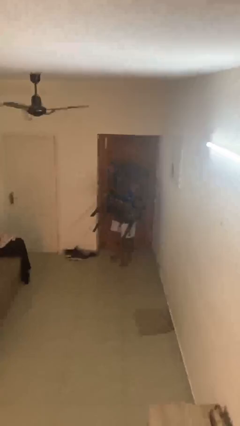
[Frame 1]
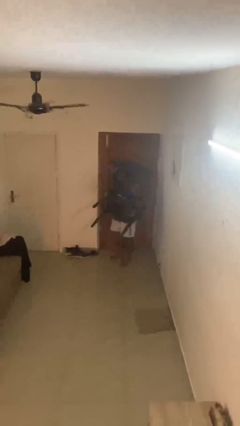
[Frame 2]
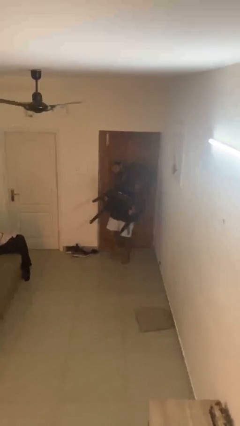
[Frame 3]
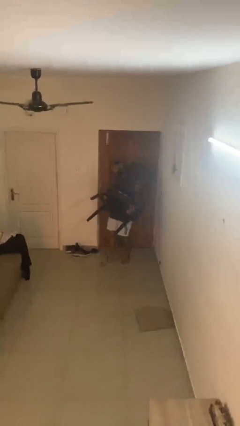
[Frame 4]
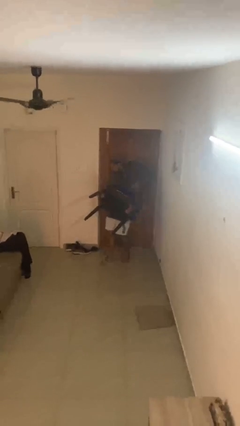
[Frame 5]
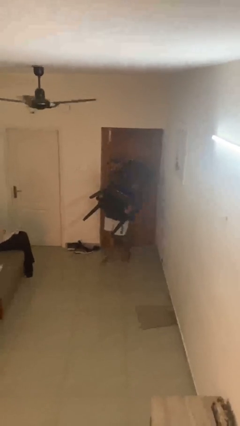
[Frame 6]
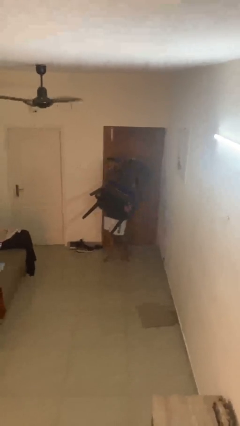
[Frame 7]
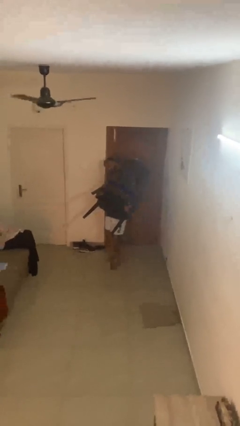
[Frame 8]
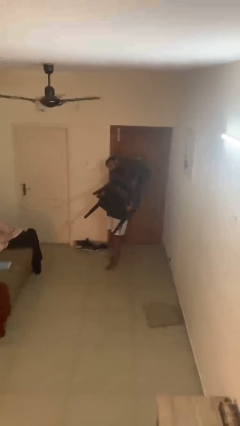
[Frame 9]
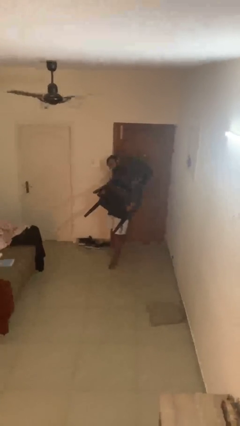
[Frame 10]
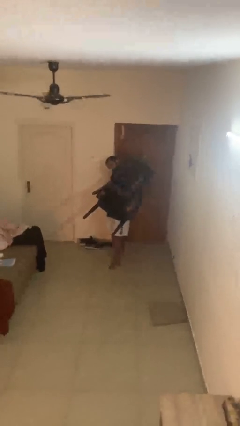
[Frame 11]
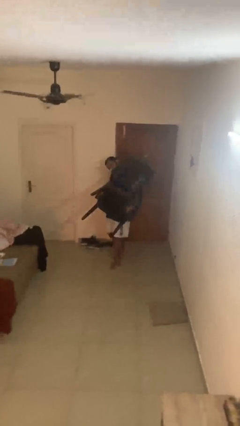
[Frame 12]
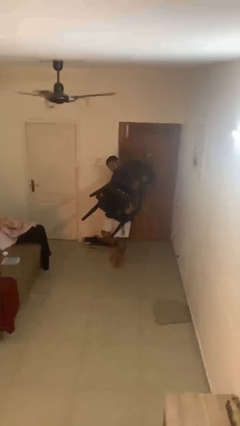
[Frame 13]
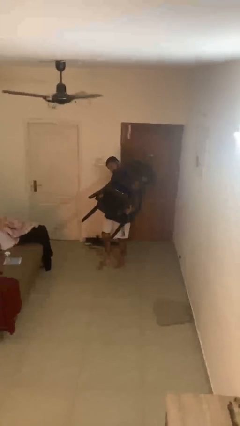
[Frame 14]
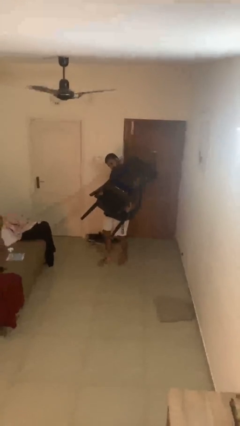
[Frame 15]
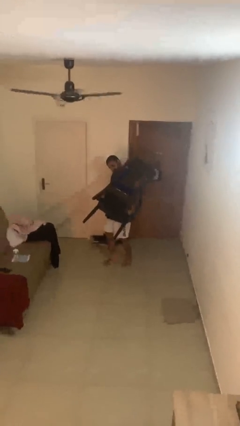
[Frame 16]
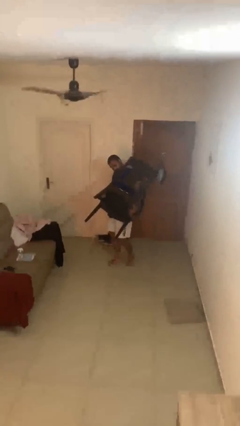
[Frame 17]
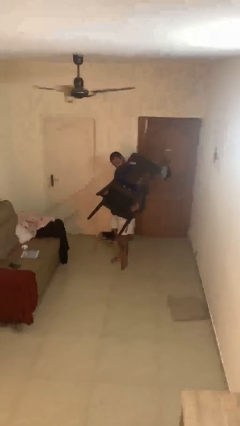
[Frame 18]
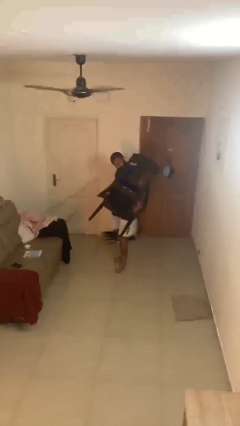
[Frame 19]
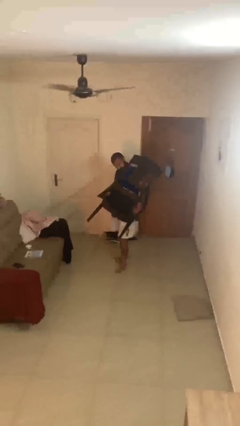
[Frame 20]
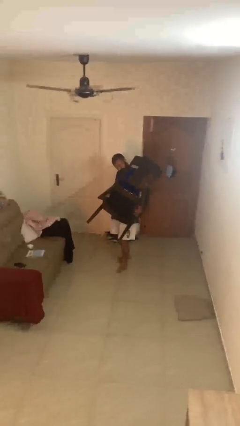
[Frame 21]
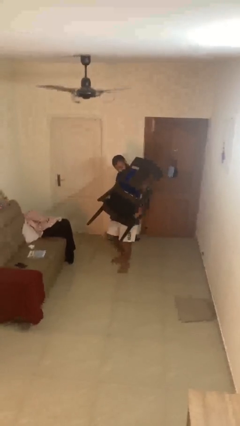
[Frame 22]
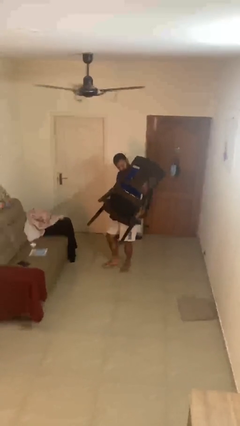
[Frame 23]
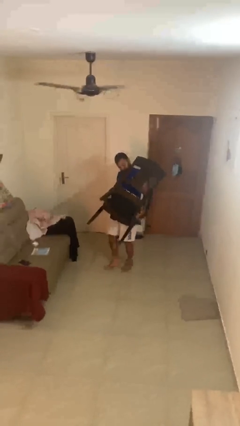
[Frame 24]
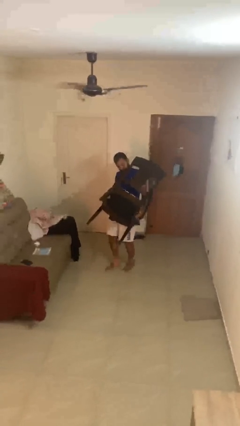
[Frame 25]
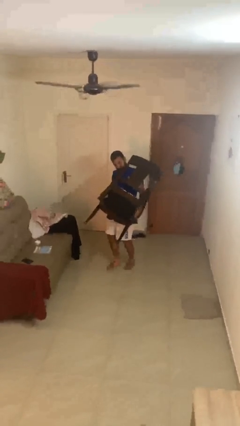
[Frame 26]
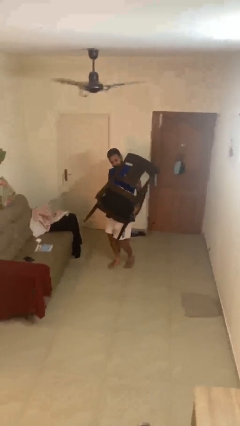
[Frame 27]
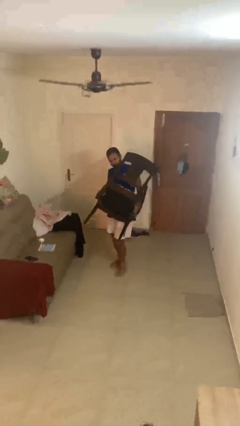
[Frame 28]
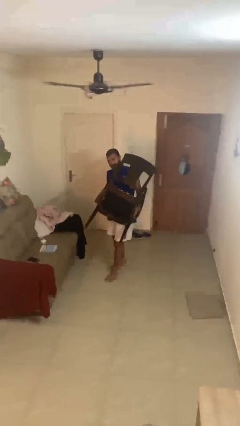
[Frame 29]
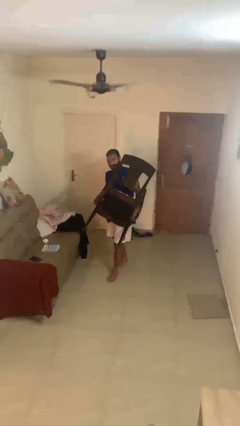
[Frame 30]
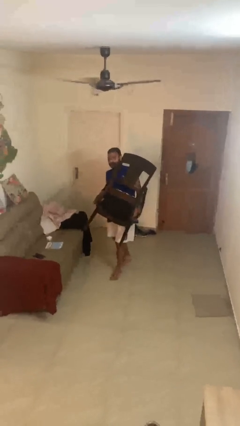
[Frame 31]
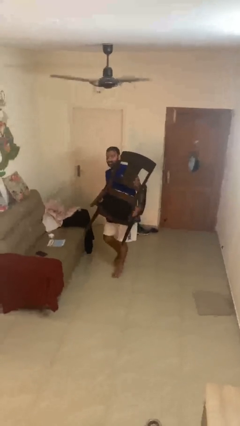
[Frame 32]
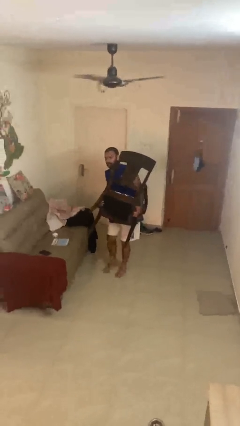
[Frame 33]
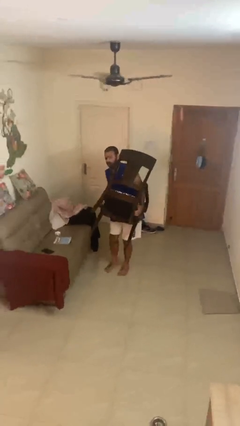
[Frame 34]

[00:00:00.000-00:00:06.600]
person carries heavy object

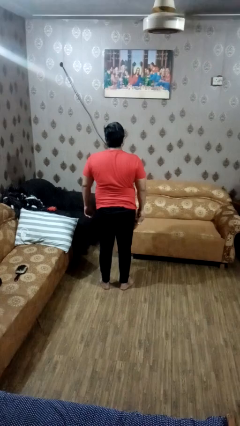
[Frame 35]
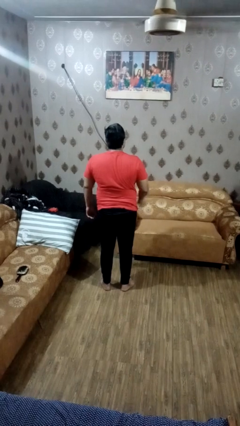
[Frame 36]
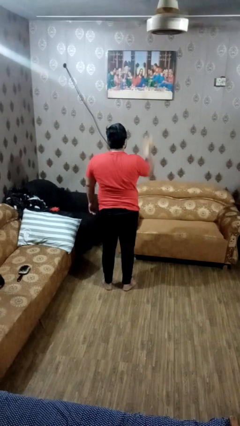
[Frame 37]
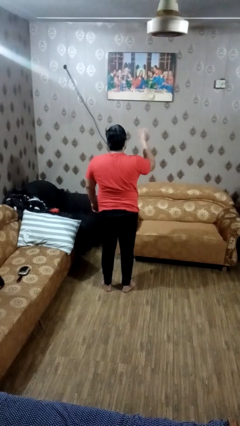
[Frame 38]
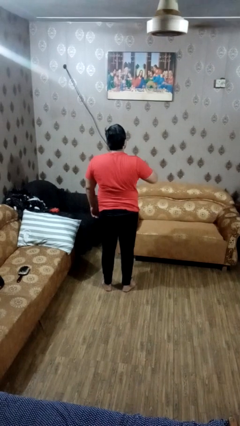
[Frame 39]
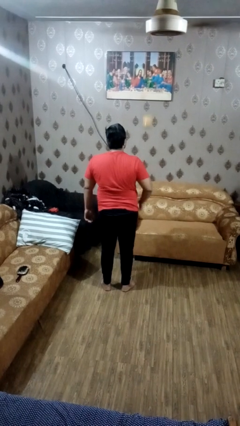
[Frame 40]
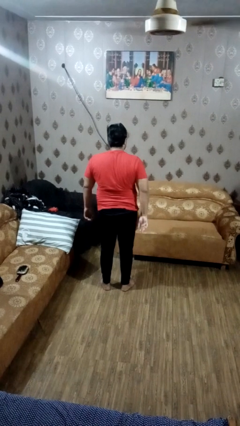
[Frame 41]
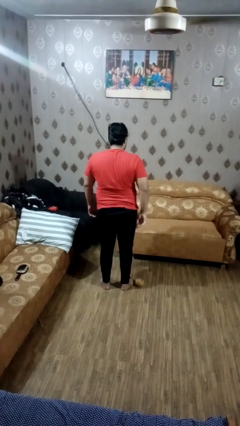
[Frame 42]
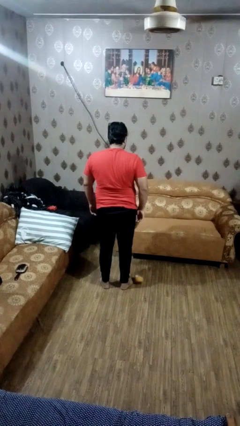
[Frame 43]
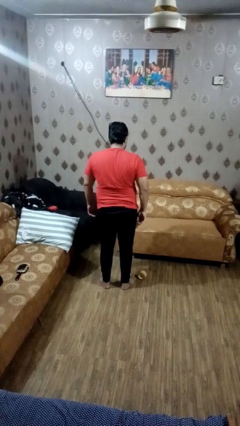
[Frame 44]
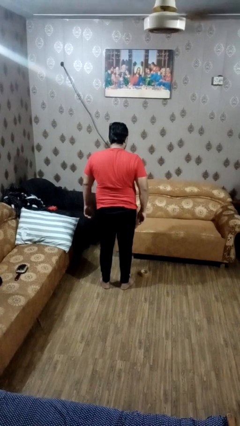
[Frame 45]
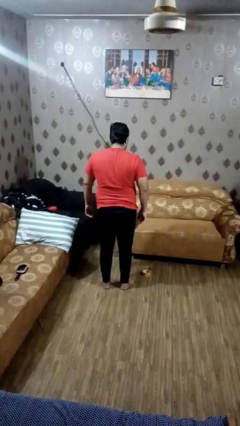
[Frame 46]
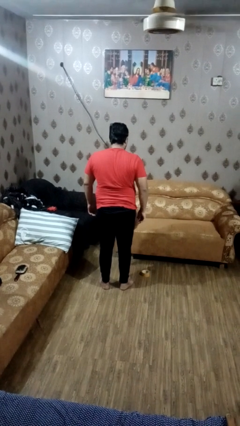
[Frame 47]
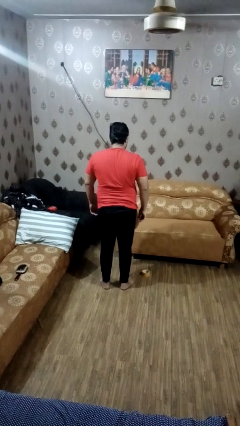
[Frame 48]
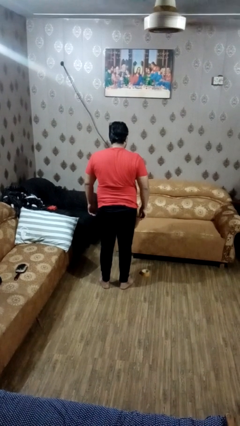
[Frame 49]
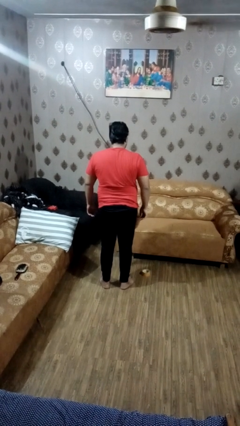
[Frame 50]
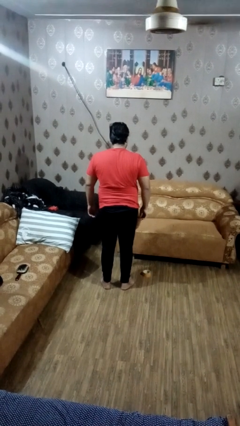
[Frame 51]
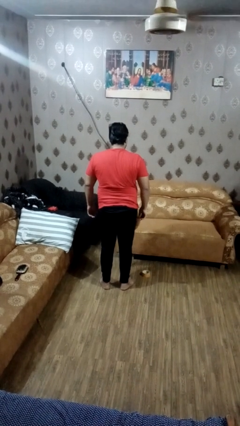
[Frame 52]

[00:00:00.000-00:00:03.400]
person throws object into air

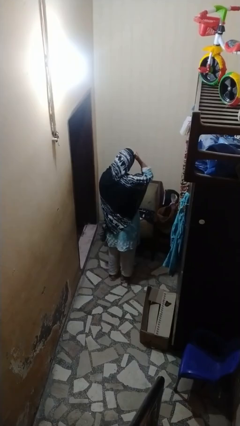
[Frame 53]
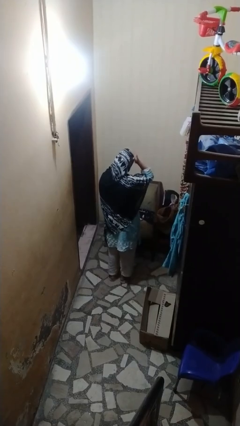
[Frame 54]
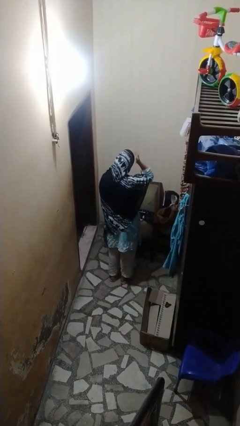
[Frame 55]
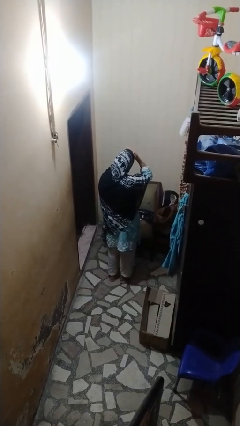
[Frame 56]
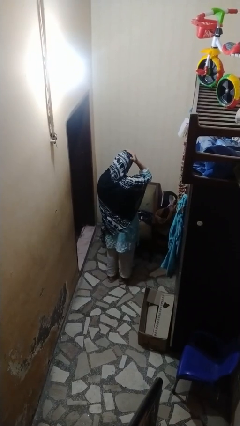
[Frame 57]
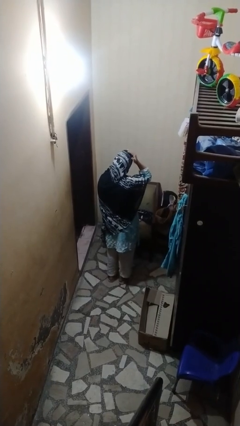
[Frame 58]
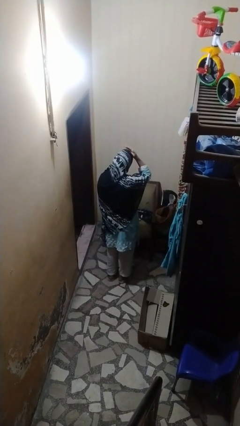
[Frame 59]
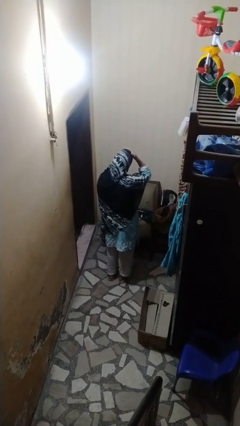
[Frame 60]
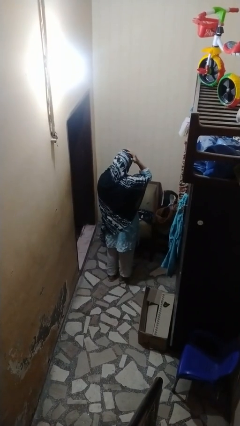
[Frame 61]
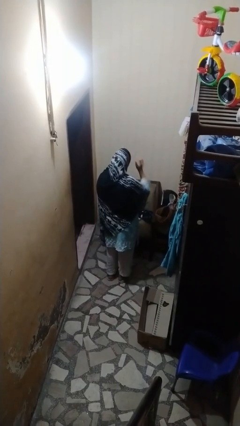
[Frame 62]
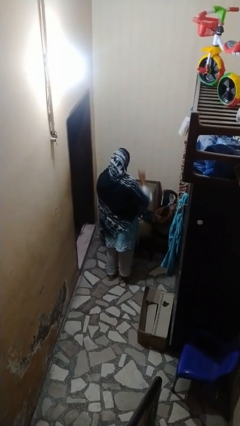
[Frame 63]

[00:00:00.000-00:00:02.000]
person pats head

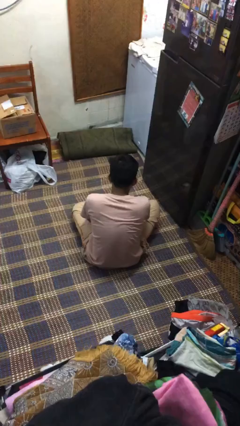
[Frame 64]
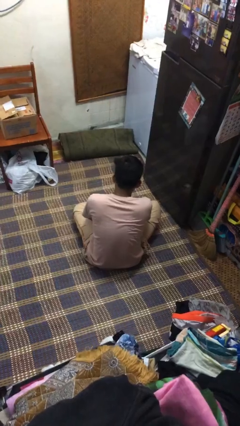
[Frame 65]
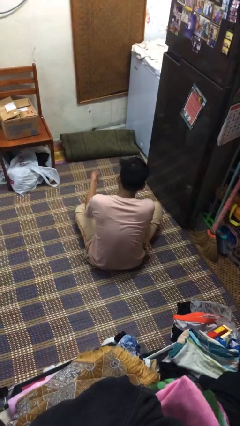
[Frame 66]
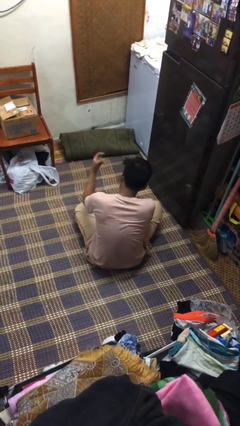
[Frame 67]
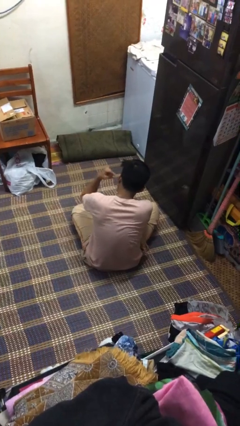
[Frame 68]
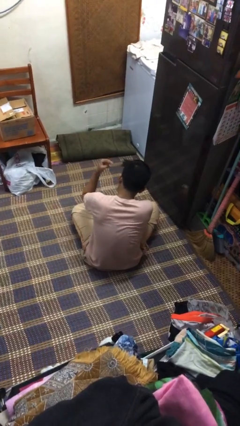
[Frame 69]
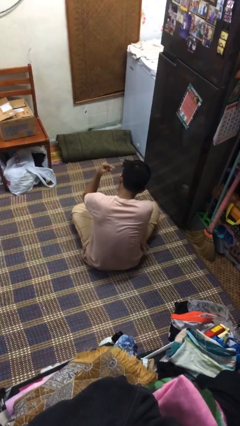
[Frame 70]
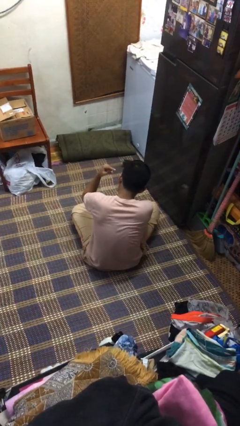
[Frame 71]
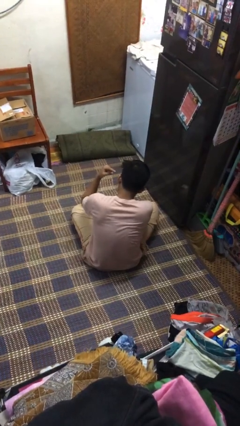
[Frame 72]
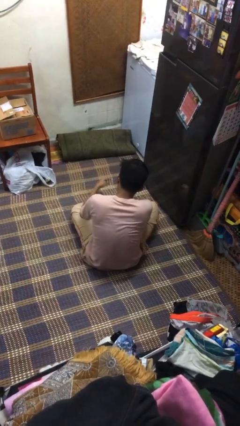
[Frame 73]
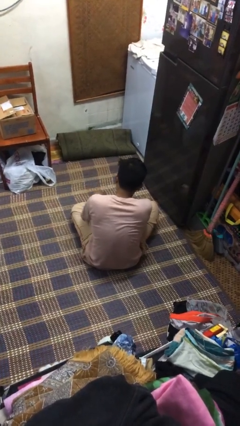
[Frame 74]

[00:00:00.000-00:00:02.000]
person gestures listen closely

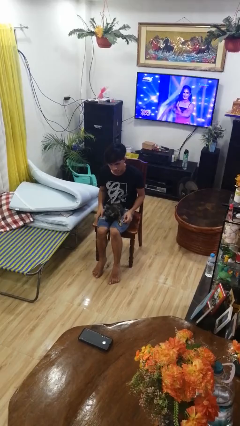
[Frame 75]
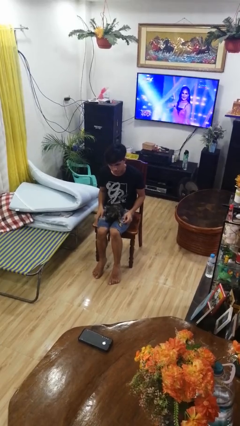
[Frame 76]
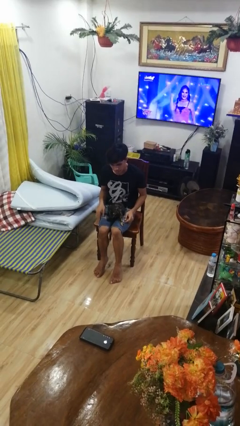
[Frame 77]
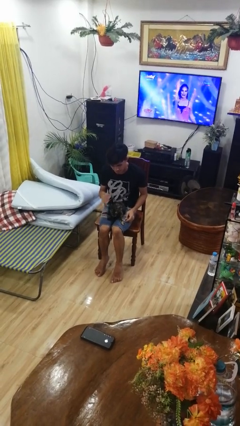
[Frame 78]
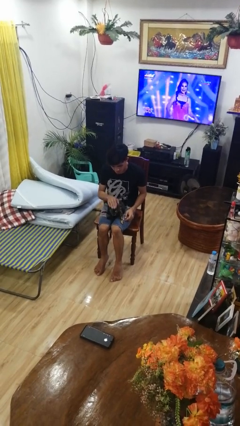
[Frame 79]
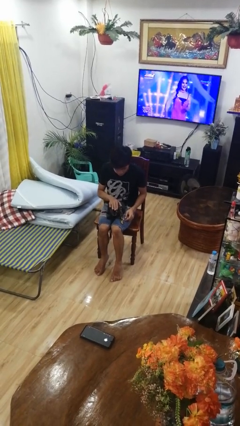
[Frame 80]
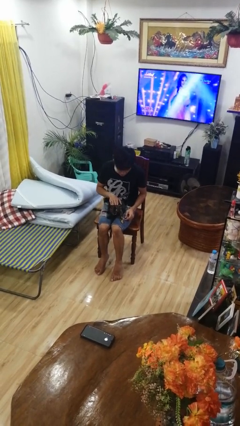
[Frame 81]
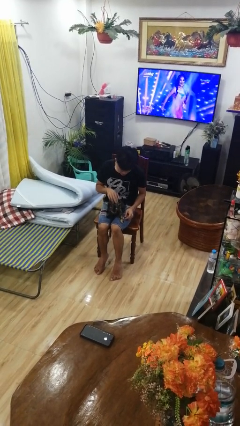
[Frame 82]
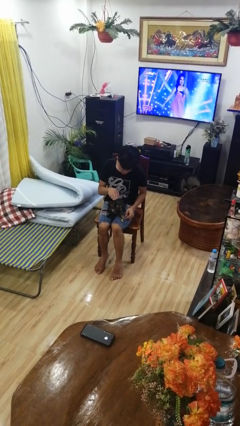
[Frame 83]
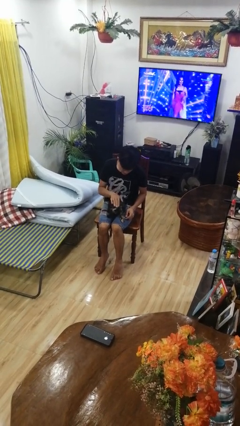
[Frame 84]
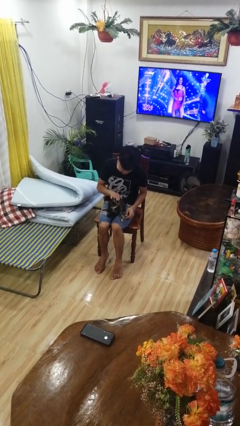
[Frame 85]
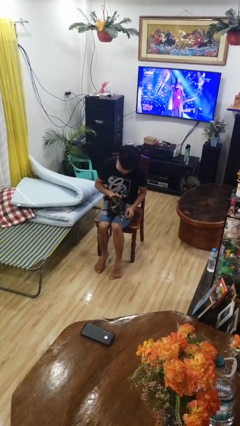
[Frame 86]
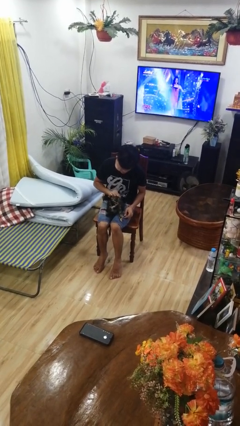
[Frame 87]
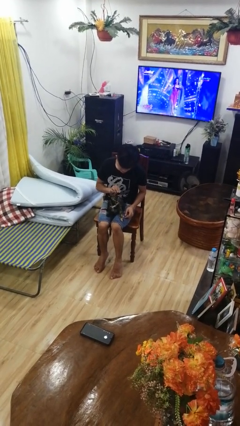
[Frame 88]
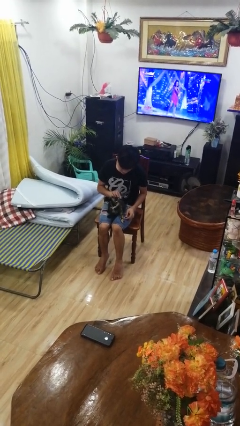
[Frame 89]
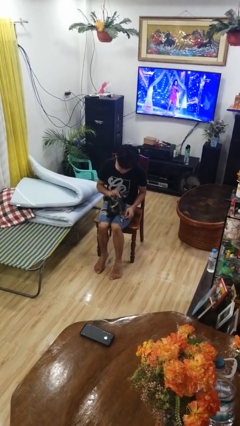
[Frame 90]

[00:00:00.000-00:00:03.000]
person pets cat

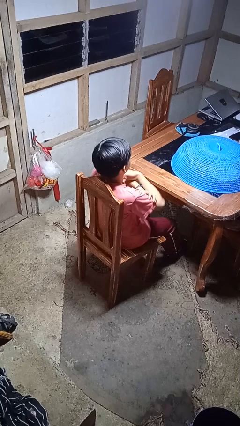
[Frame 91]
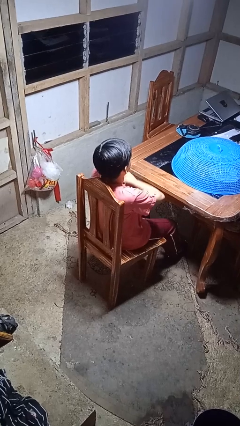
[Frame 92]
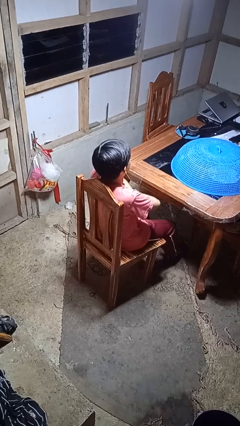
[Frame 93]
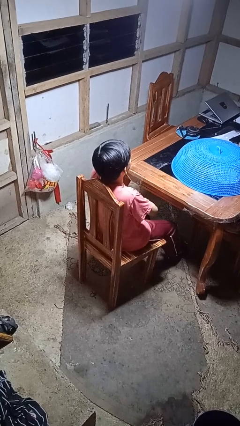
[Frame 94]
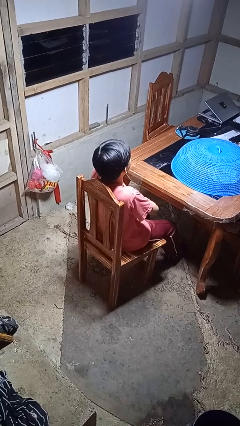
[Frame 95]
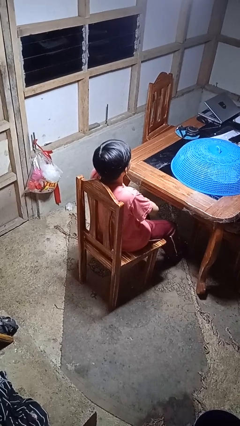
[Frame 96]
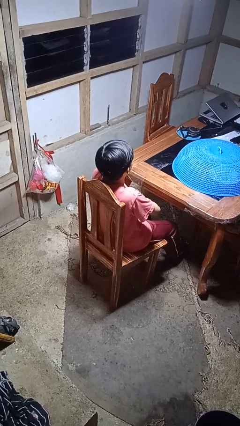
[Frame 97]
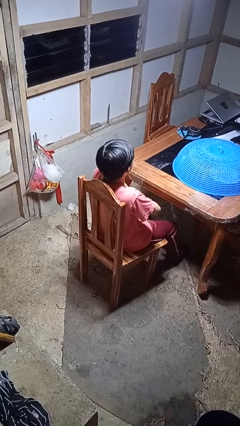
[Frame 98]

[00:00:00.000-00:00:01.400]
person crosses arms
